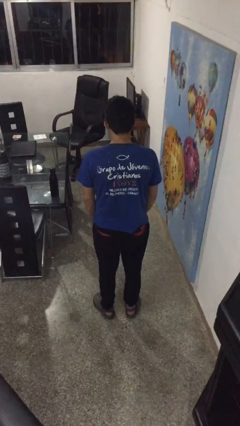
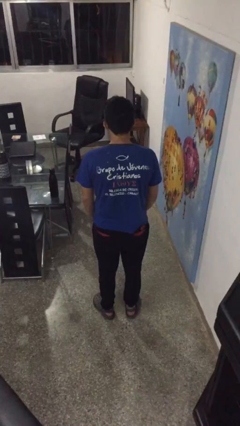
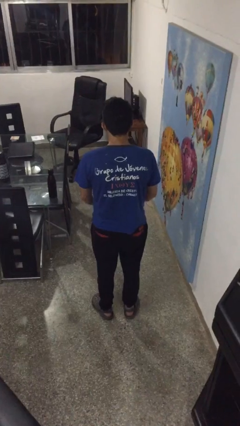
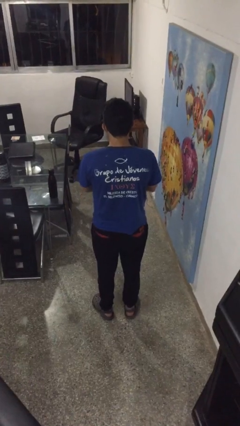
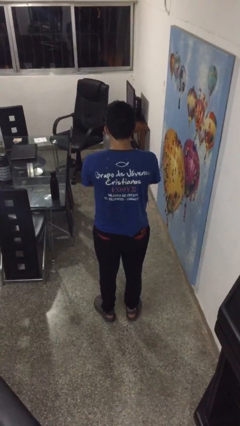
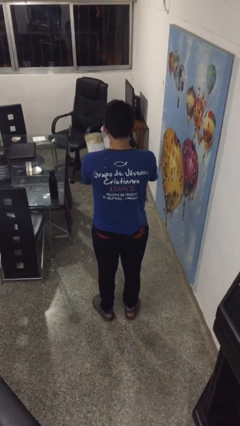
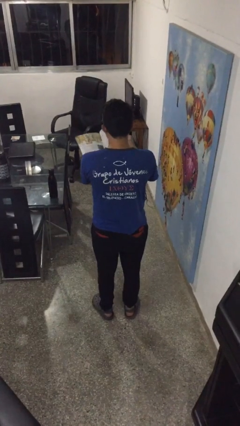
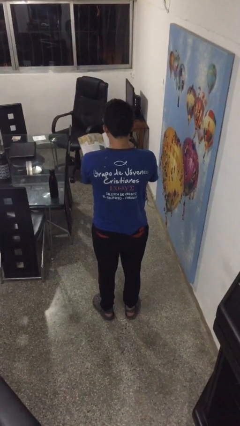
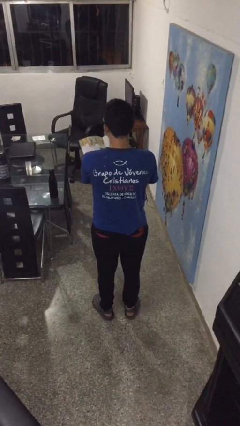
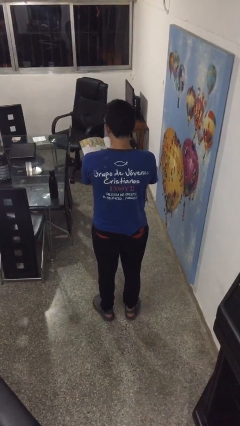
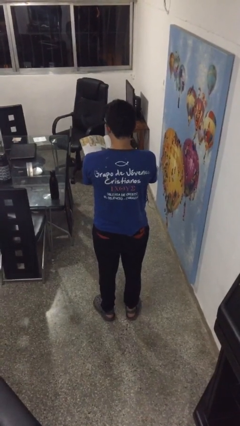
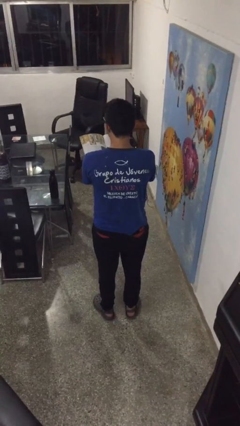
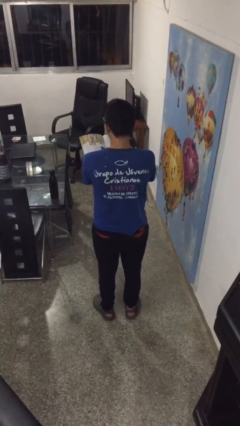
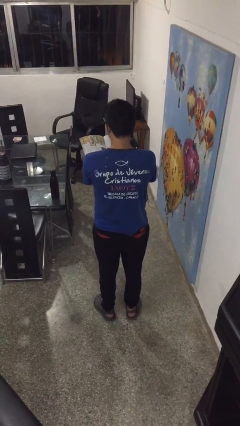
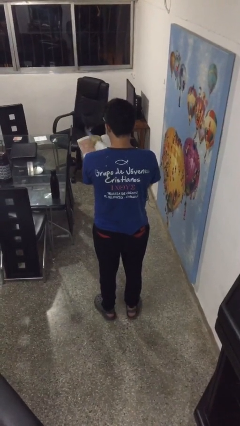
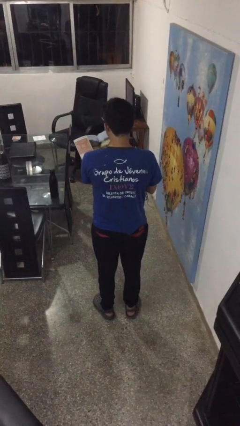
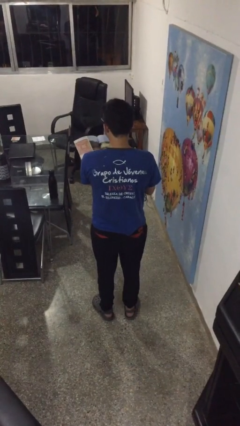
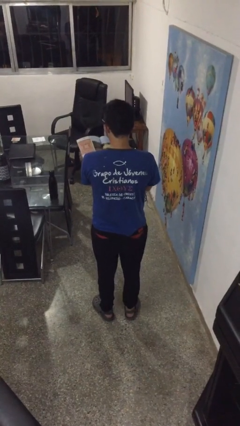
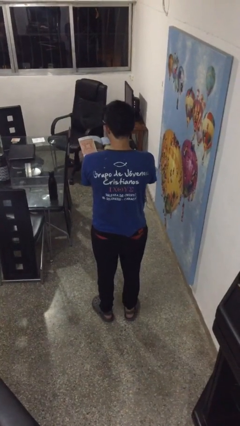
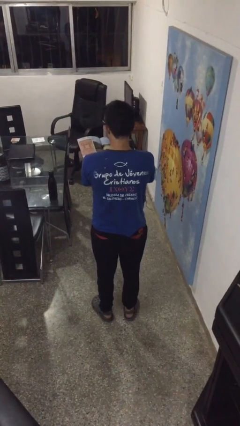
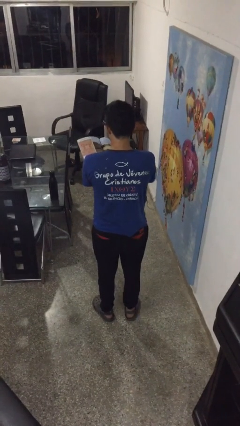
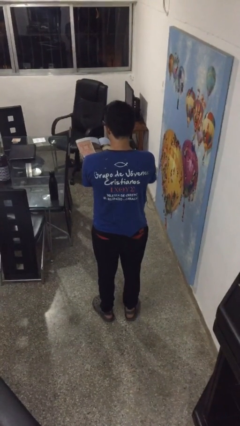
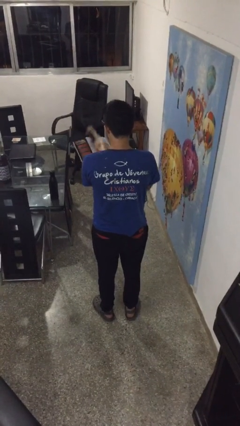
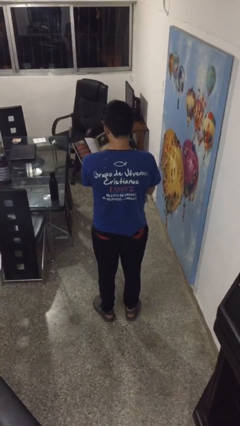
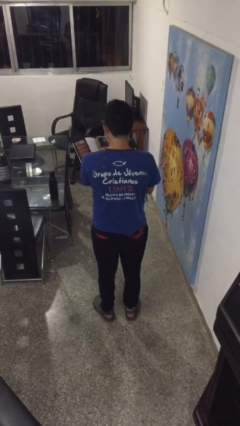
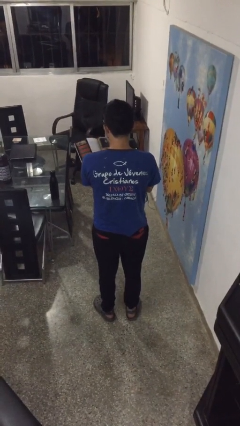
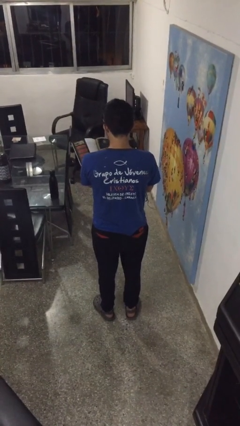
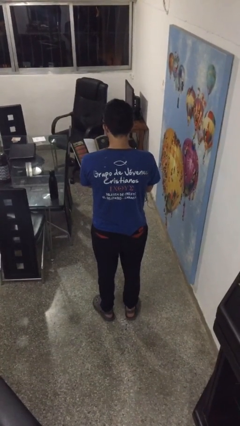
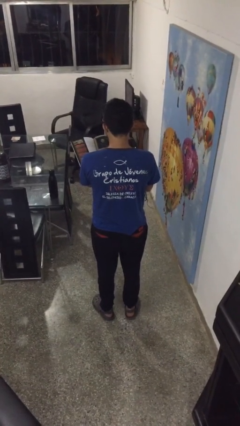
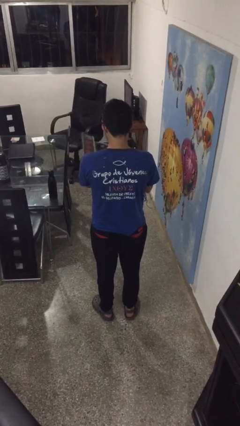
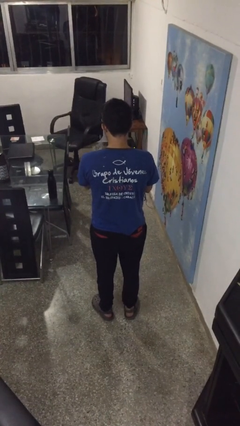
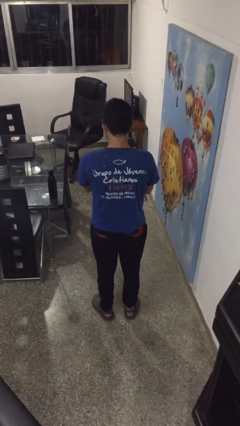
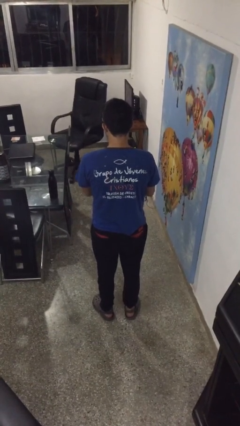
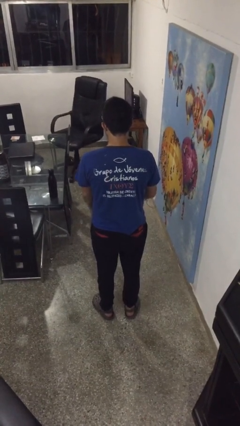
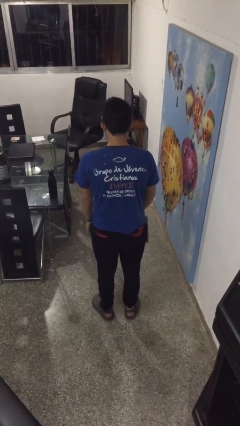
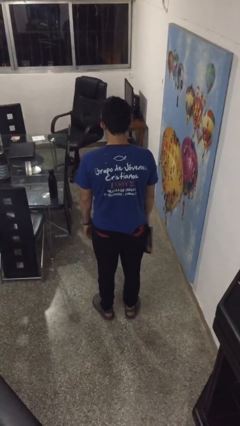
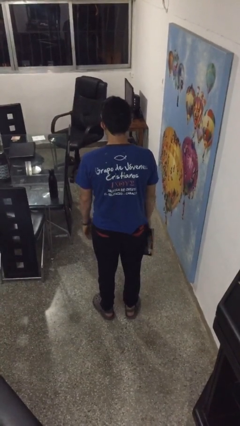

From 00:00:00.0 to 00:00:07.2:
person reads magazine

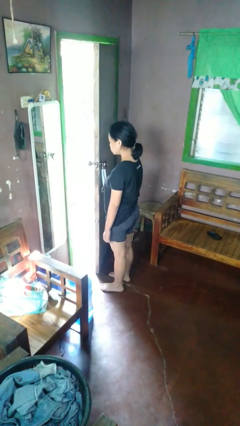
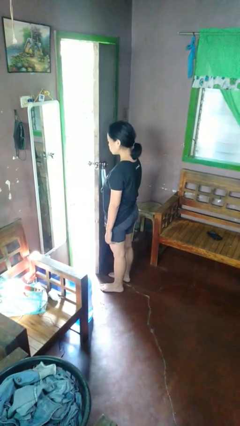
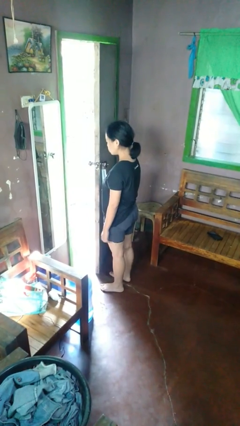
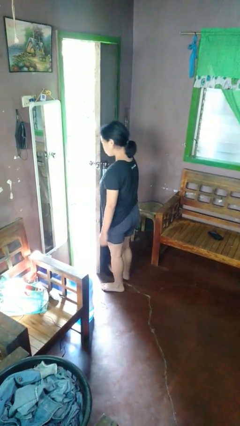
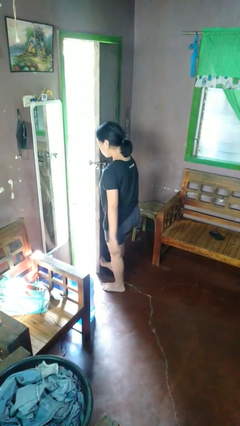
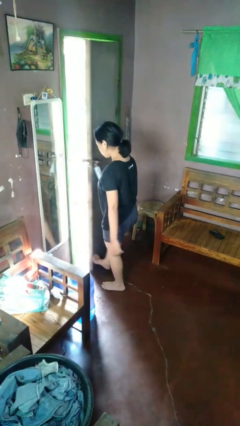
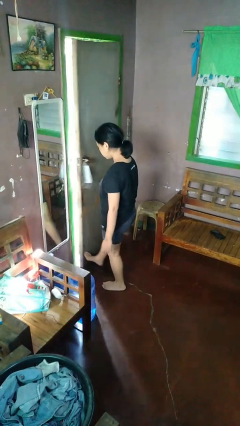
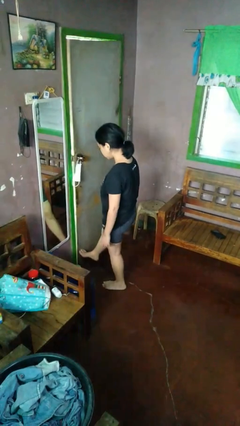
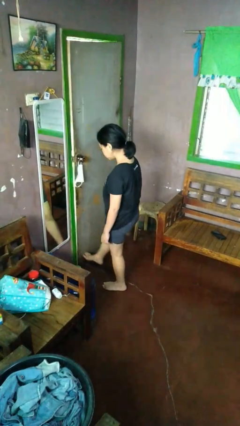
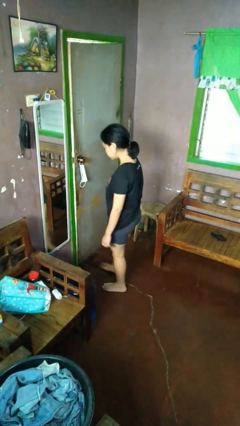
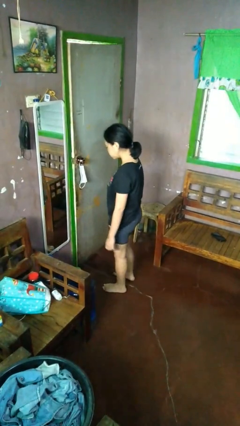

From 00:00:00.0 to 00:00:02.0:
person closes door with foot

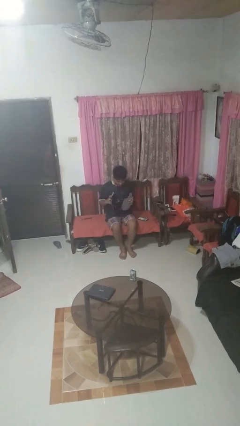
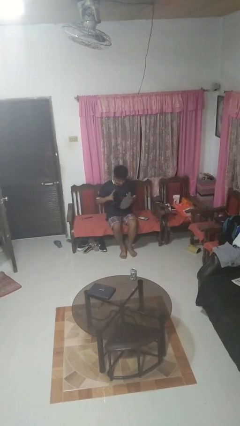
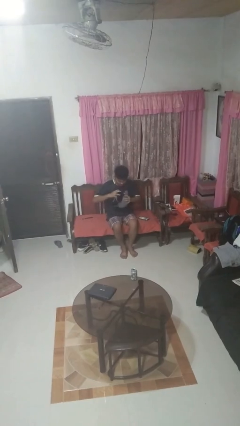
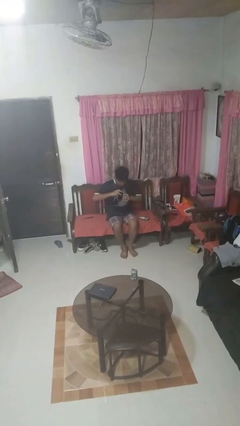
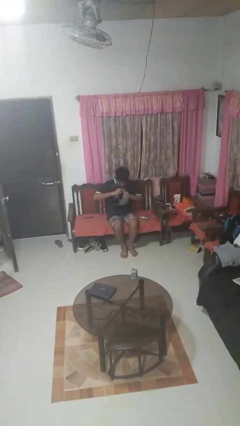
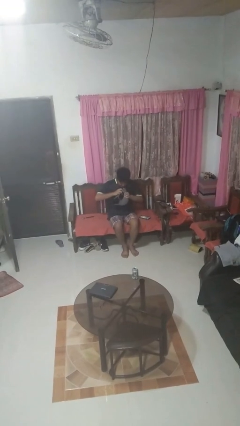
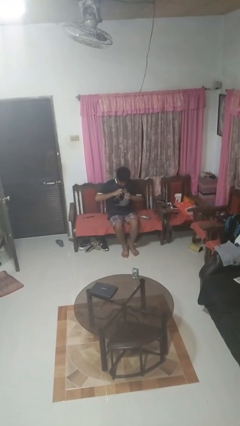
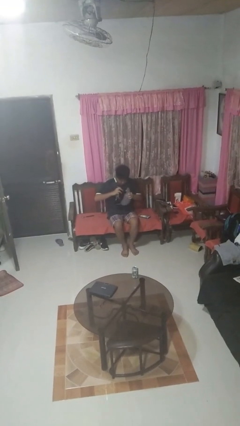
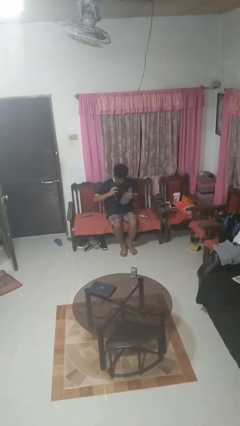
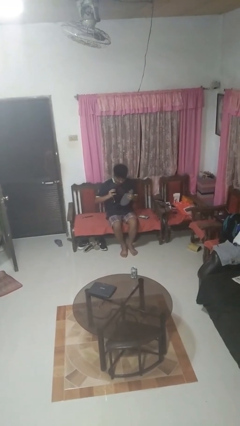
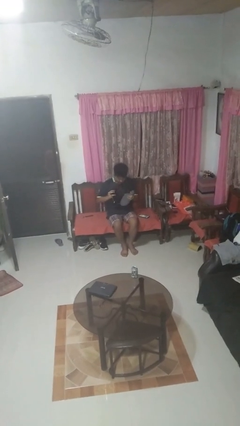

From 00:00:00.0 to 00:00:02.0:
person squeezes object

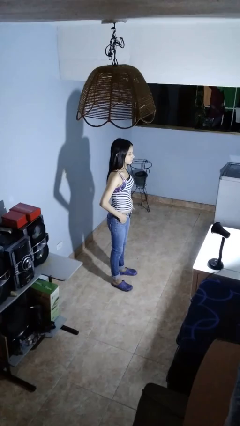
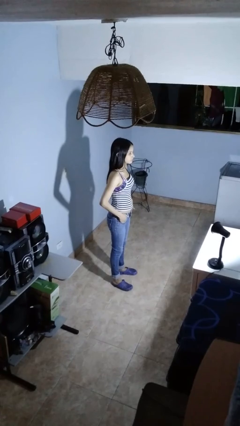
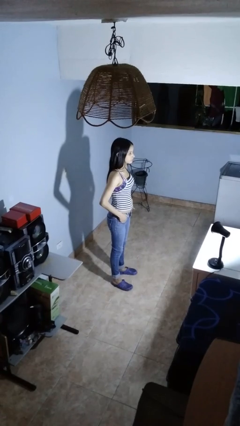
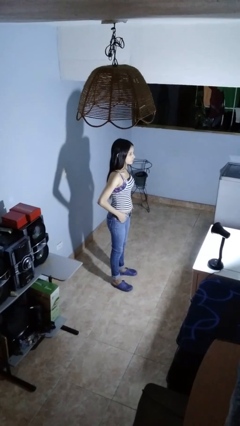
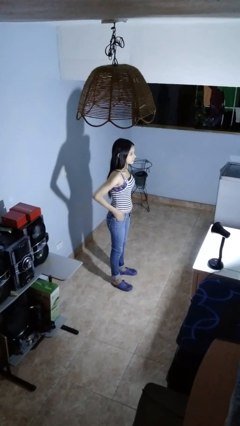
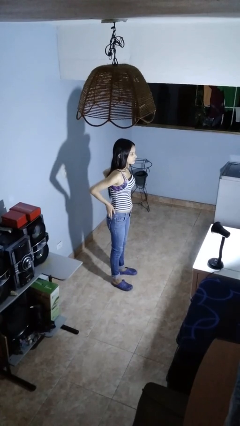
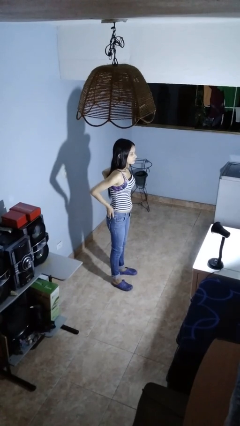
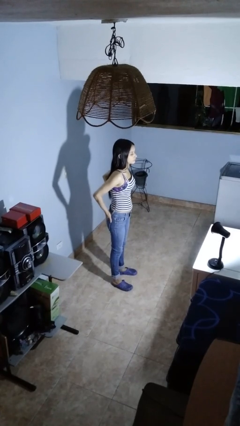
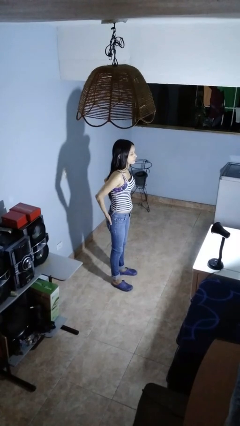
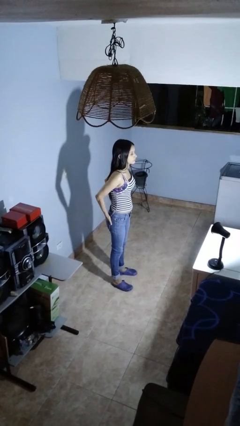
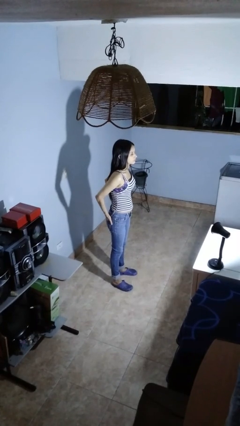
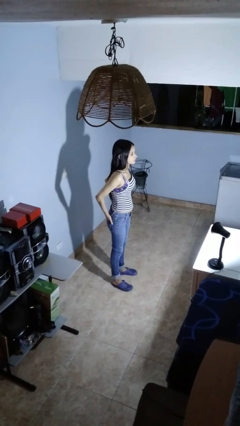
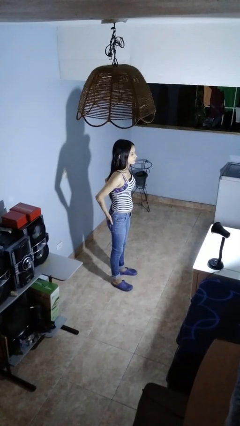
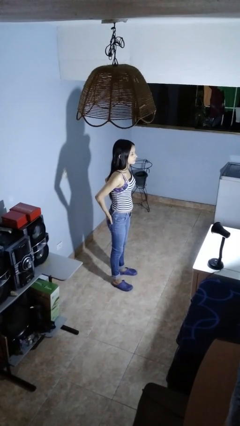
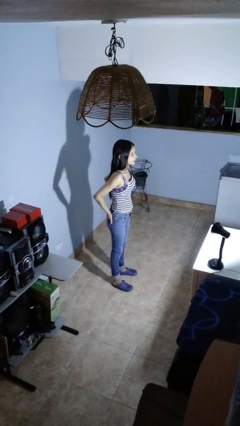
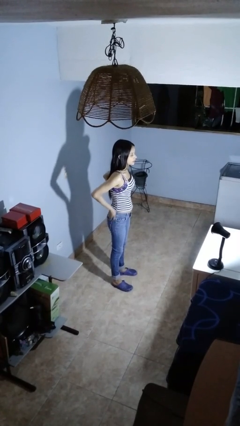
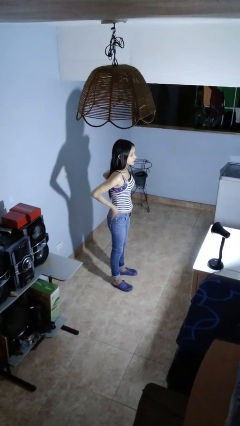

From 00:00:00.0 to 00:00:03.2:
person puts hands in back pockets

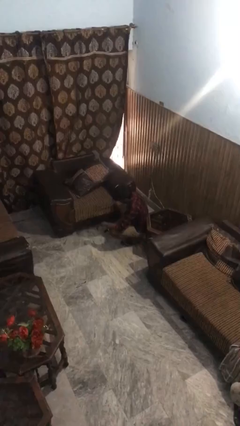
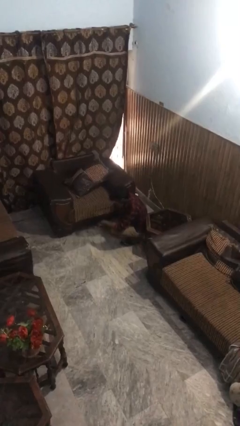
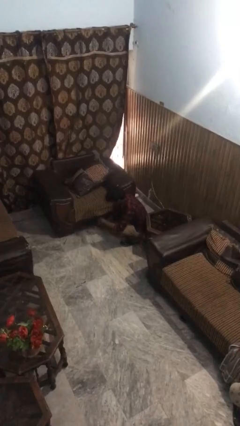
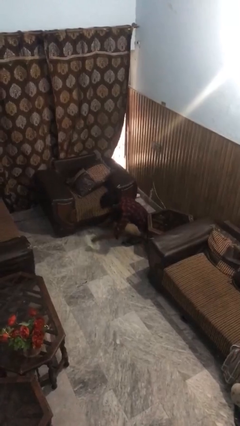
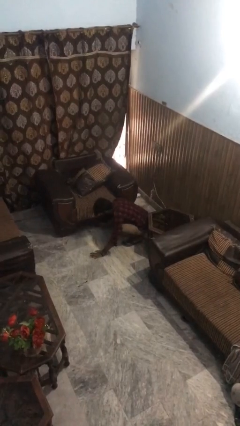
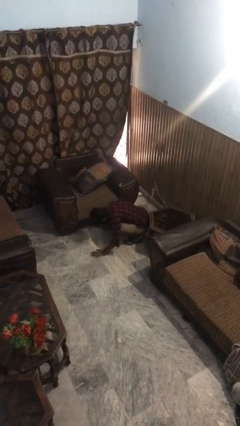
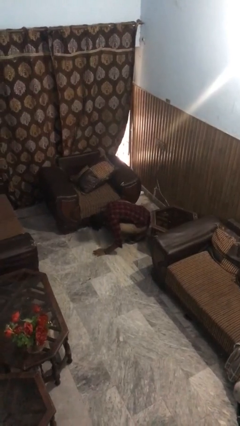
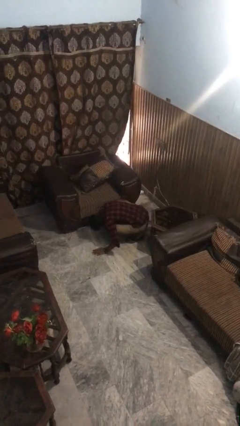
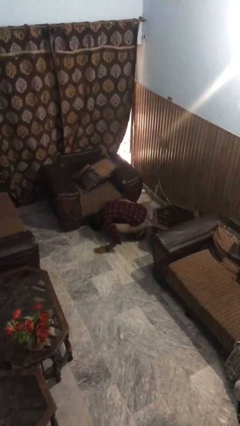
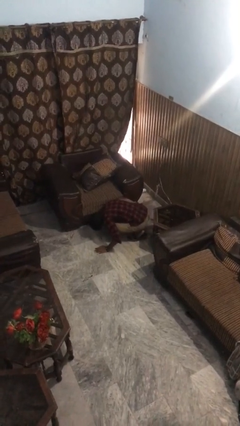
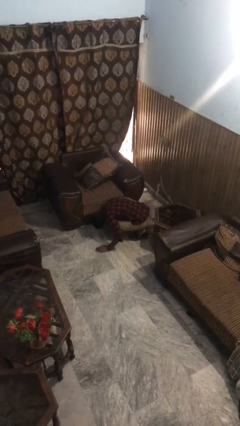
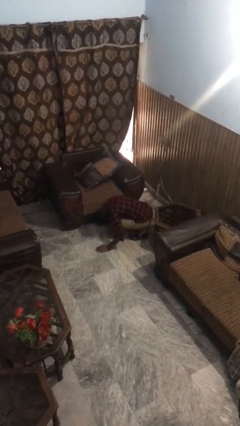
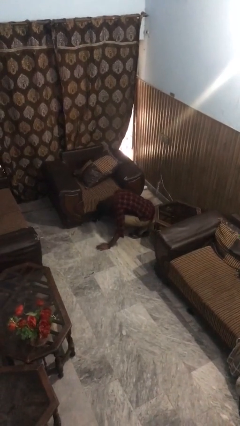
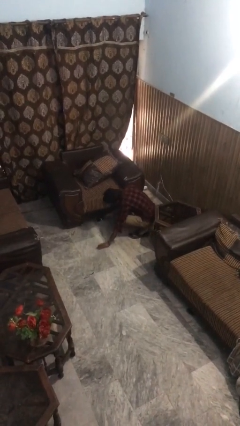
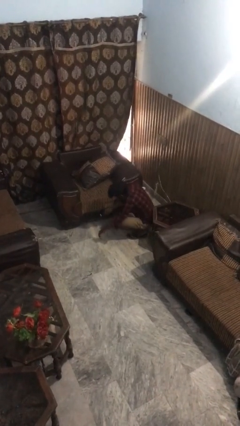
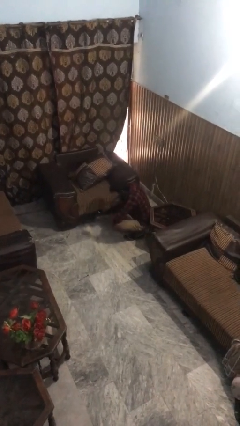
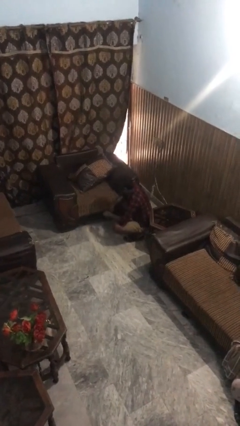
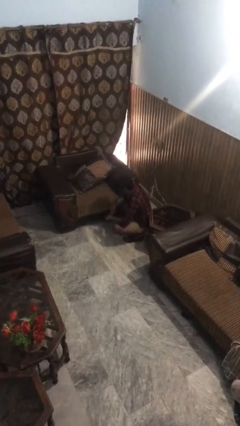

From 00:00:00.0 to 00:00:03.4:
person searches under couch
